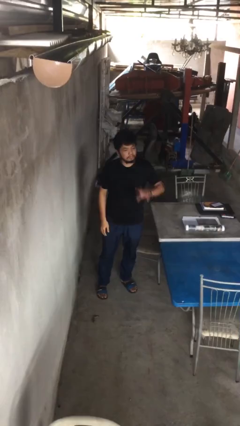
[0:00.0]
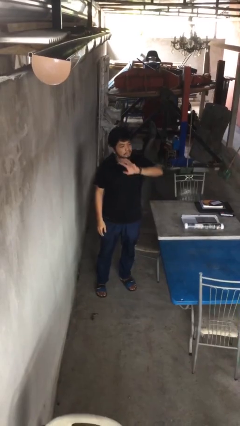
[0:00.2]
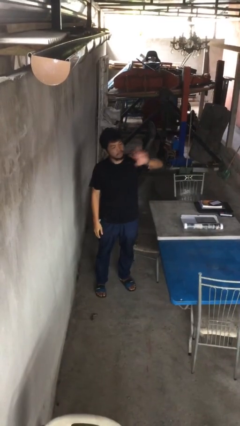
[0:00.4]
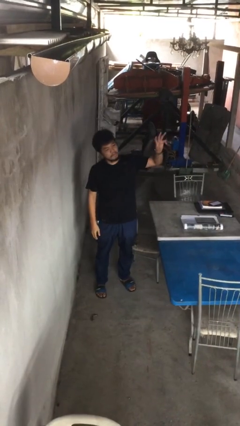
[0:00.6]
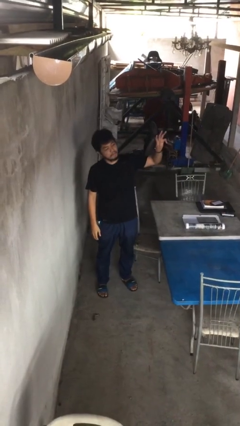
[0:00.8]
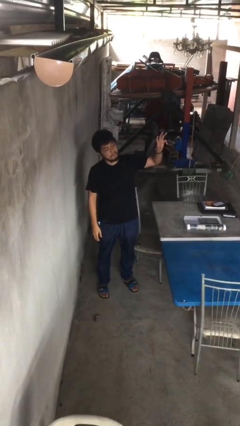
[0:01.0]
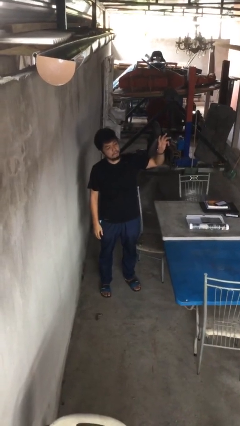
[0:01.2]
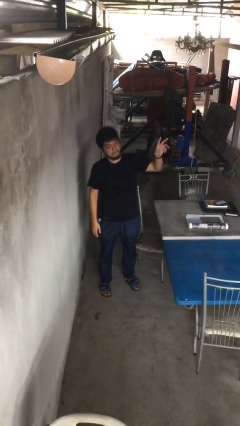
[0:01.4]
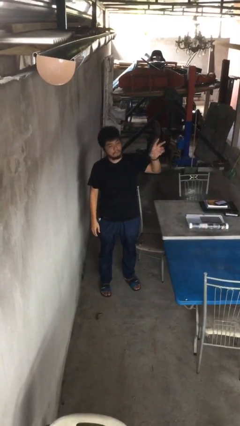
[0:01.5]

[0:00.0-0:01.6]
person gestures swipe left

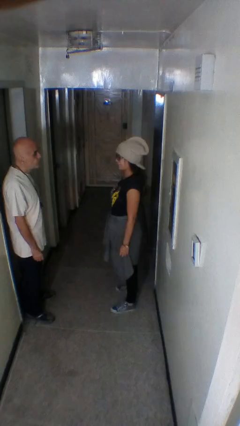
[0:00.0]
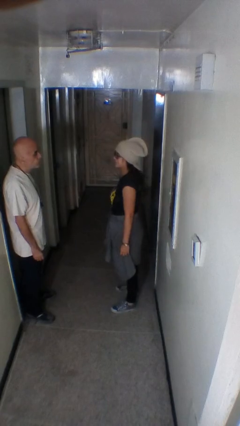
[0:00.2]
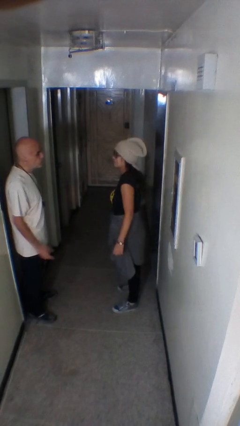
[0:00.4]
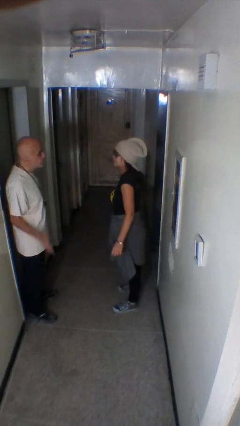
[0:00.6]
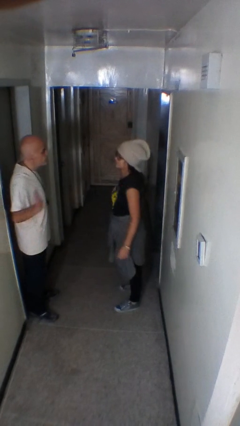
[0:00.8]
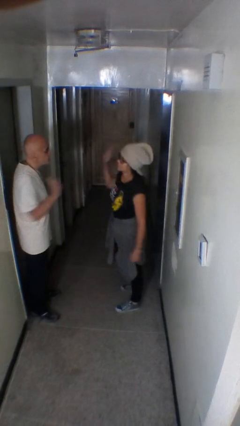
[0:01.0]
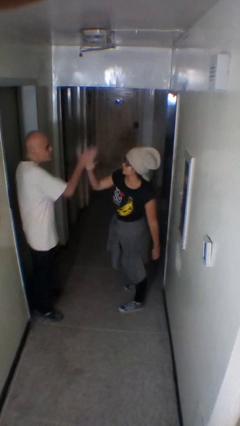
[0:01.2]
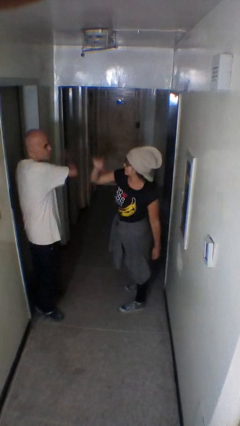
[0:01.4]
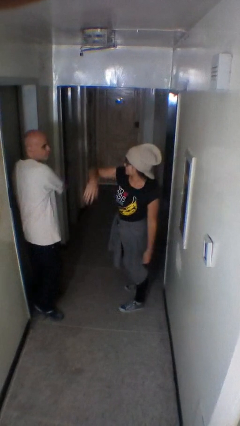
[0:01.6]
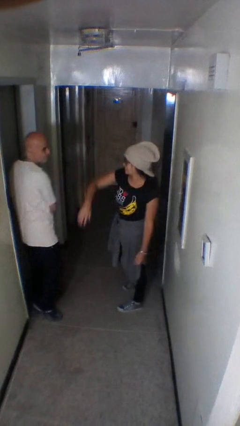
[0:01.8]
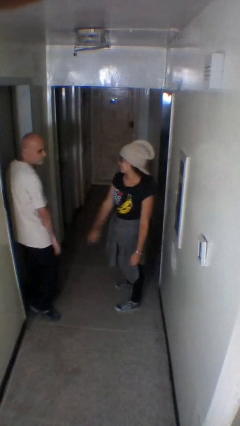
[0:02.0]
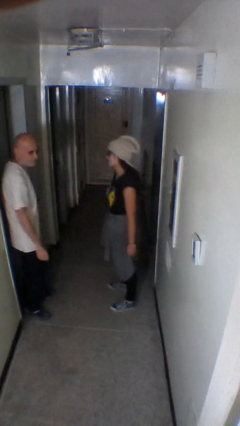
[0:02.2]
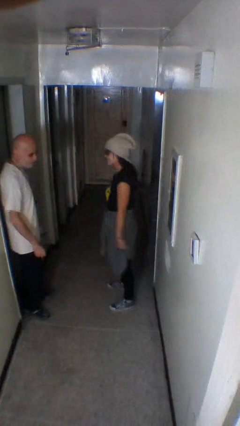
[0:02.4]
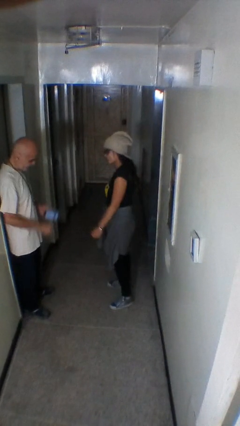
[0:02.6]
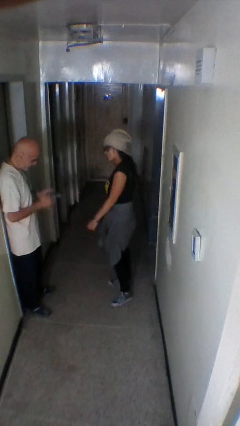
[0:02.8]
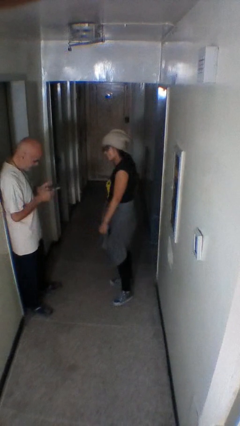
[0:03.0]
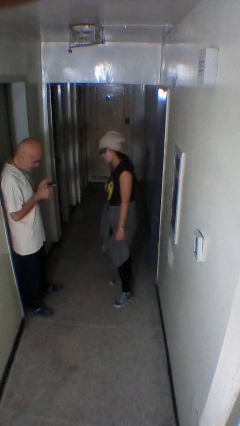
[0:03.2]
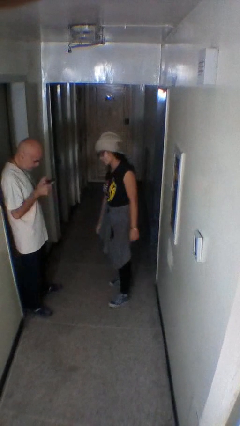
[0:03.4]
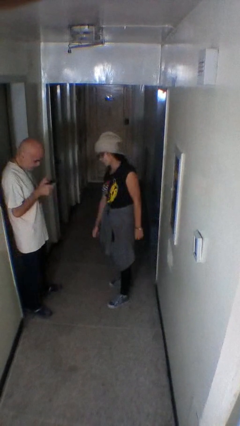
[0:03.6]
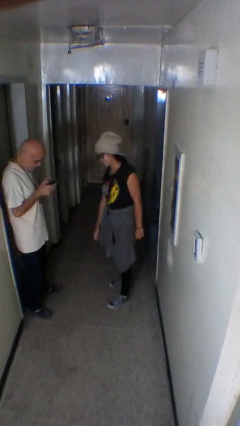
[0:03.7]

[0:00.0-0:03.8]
person highfives hand

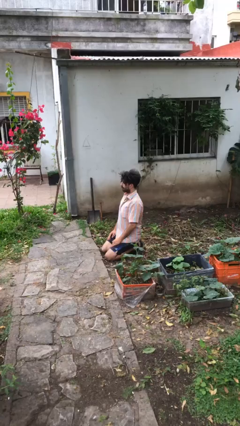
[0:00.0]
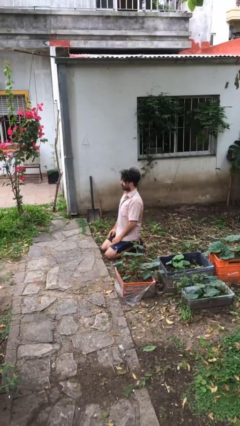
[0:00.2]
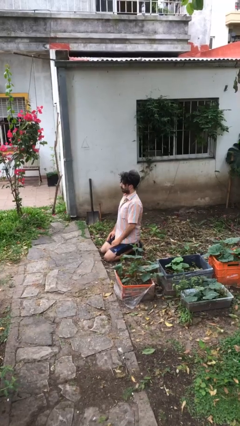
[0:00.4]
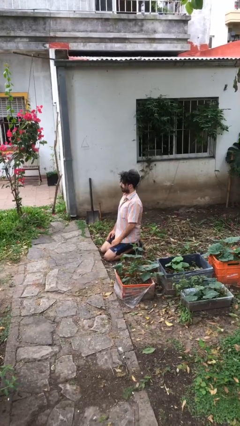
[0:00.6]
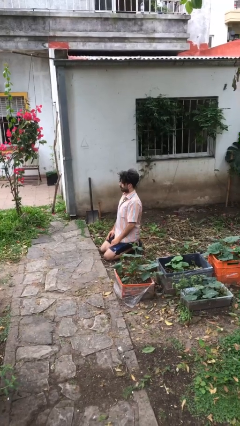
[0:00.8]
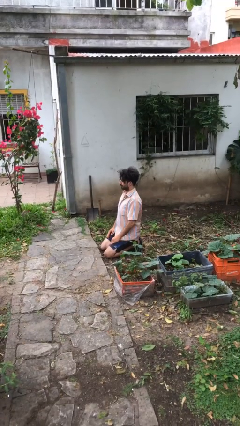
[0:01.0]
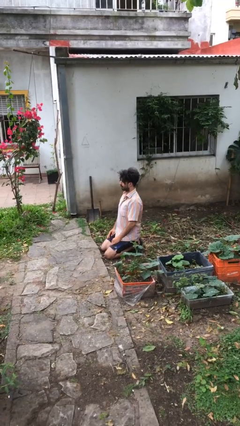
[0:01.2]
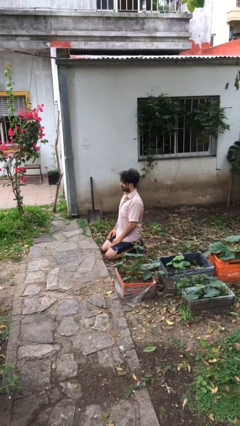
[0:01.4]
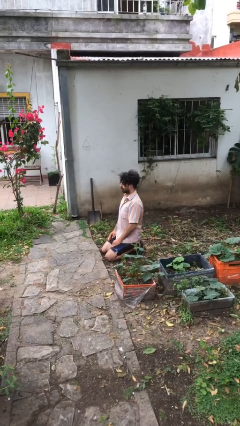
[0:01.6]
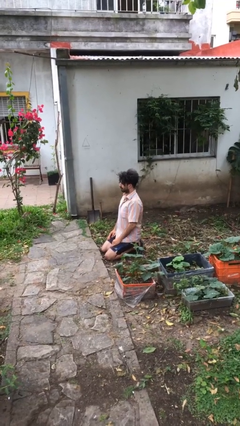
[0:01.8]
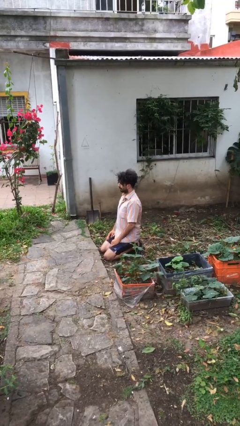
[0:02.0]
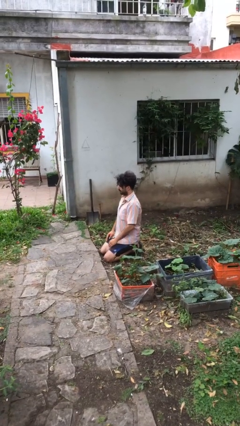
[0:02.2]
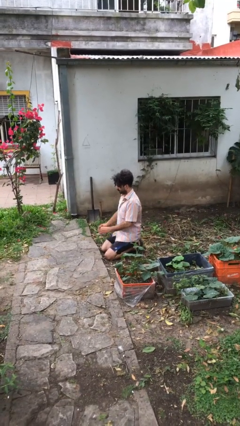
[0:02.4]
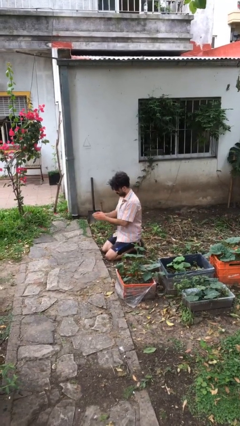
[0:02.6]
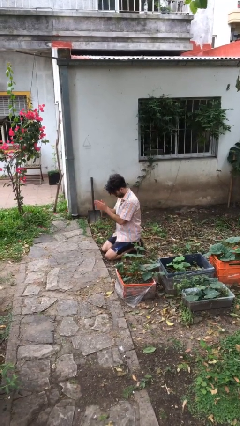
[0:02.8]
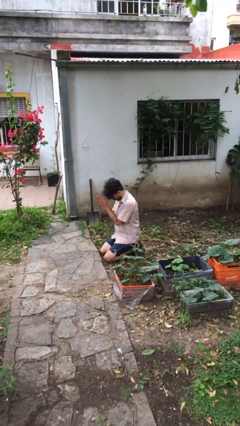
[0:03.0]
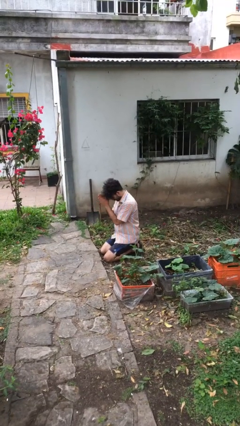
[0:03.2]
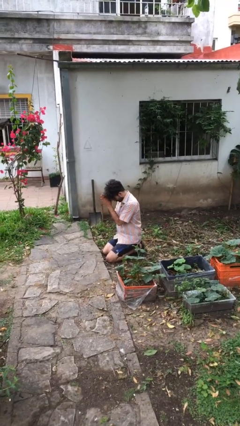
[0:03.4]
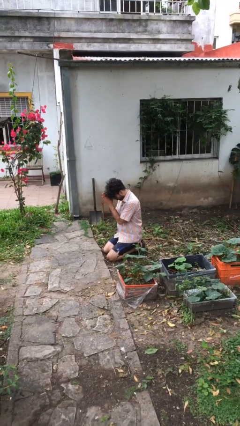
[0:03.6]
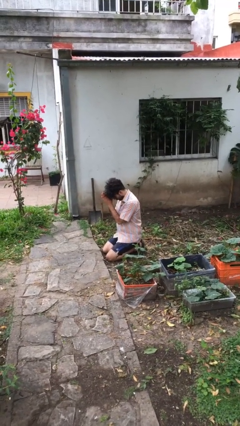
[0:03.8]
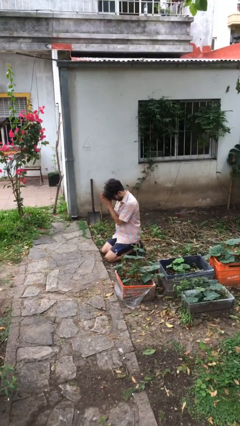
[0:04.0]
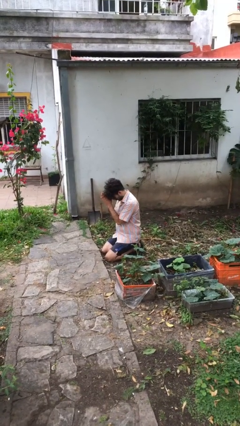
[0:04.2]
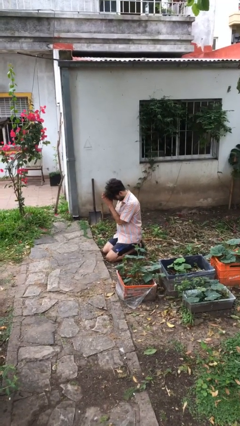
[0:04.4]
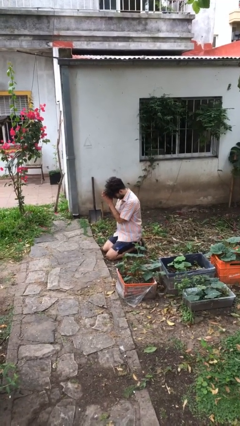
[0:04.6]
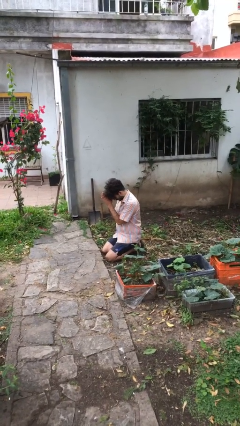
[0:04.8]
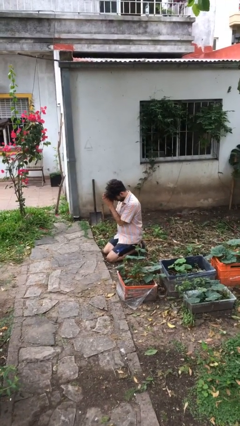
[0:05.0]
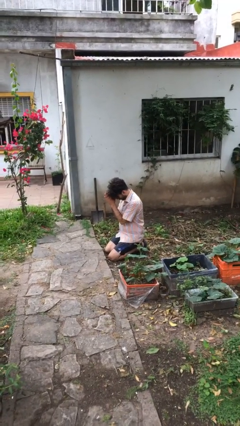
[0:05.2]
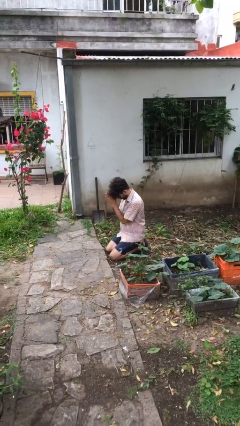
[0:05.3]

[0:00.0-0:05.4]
person prays

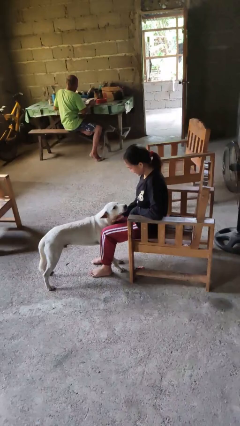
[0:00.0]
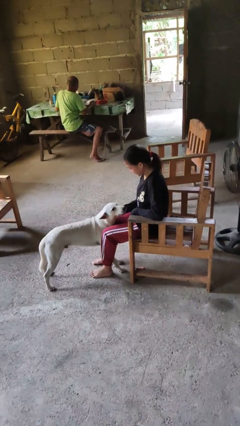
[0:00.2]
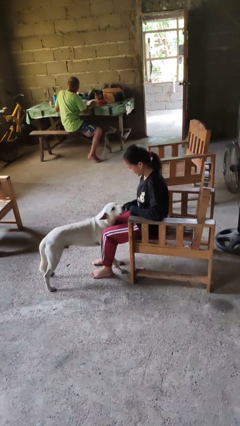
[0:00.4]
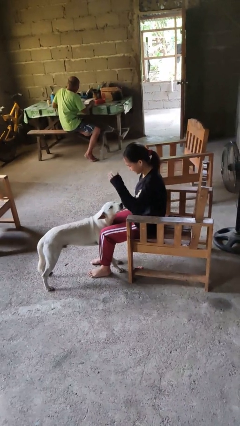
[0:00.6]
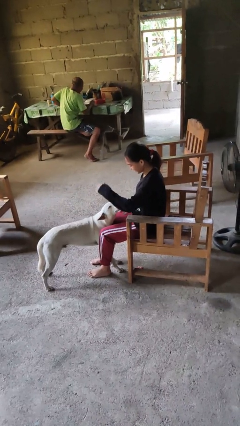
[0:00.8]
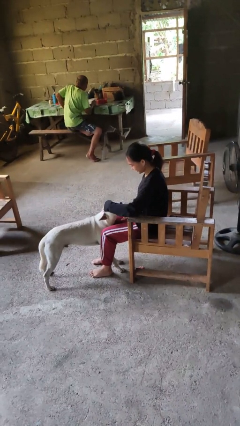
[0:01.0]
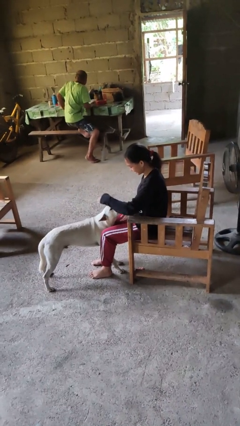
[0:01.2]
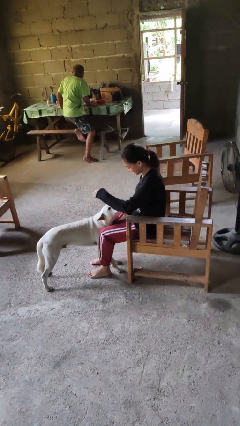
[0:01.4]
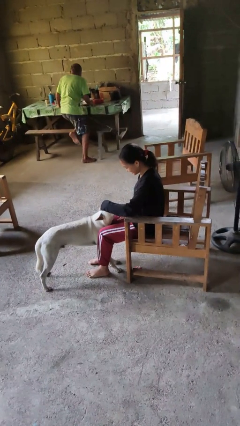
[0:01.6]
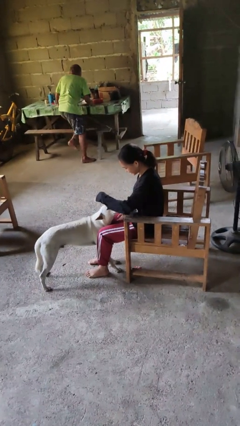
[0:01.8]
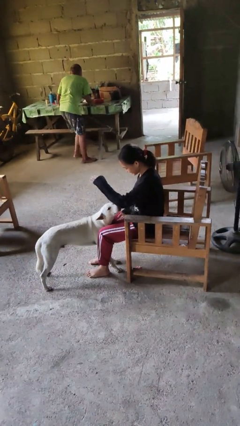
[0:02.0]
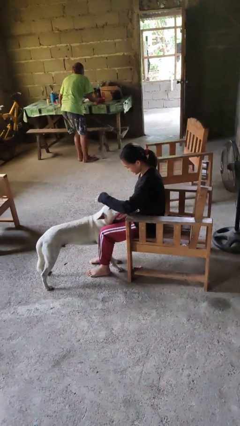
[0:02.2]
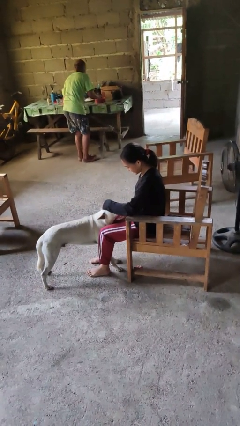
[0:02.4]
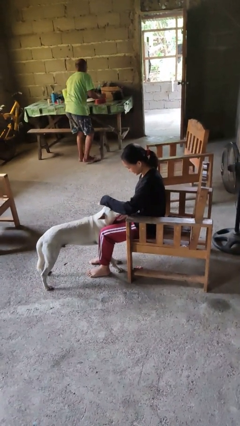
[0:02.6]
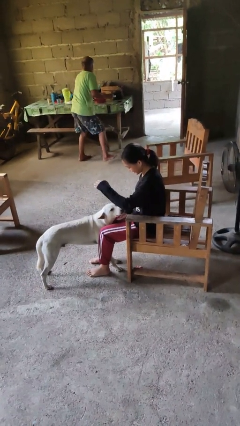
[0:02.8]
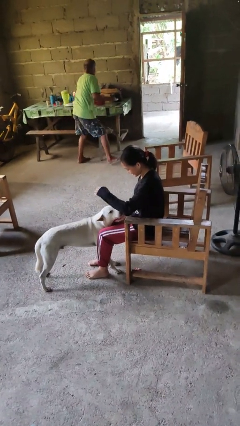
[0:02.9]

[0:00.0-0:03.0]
person pets dog

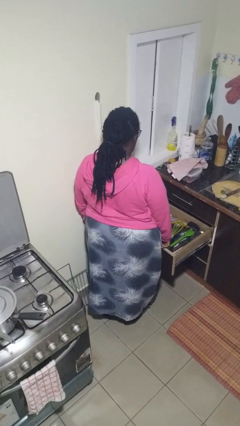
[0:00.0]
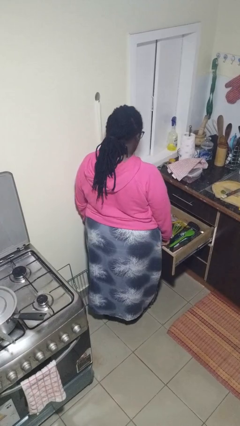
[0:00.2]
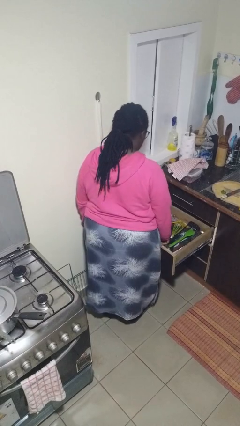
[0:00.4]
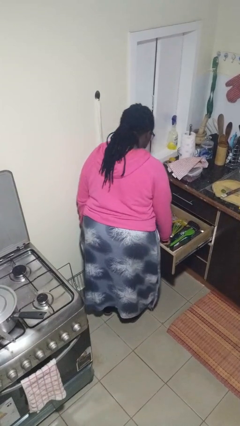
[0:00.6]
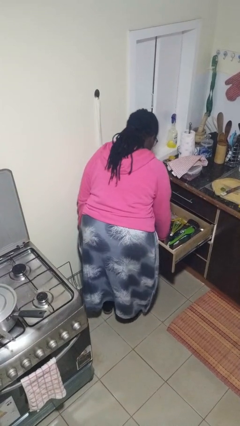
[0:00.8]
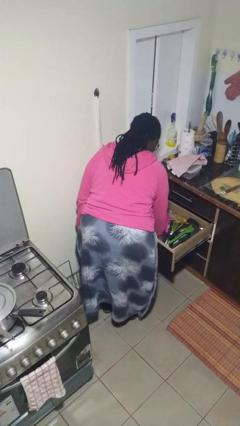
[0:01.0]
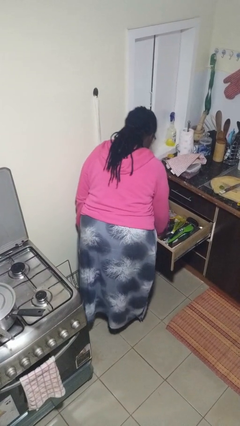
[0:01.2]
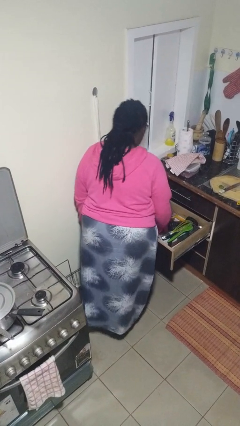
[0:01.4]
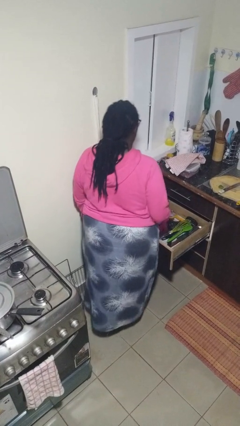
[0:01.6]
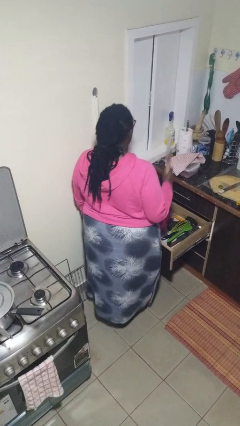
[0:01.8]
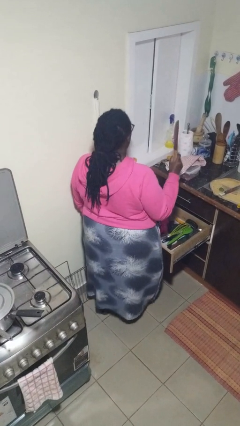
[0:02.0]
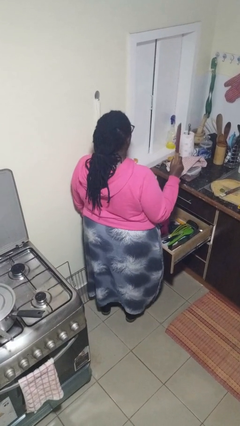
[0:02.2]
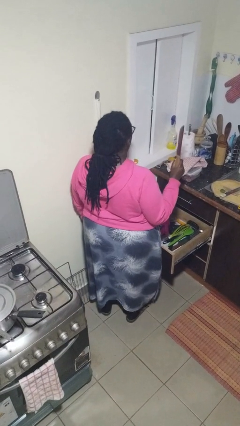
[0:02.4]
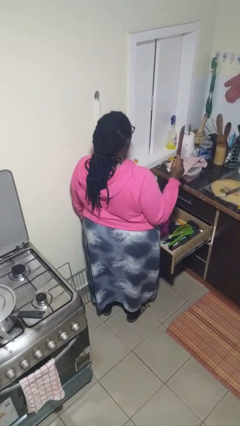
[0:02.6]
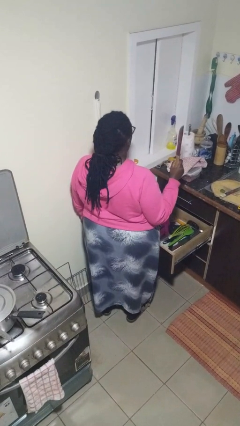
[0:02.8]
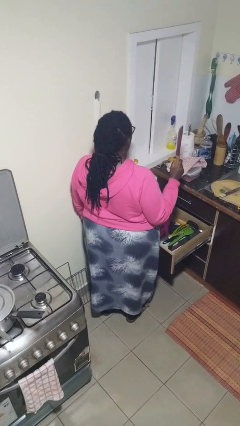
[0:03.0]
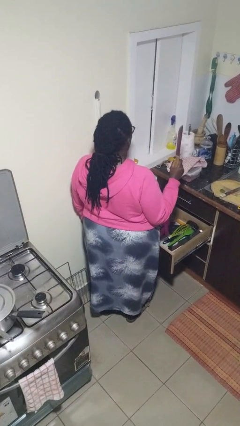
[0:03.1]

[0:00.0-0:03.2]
person takes object from kitchen drawer
